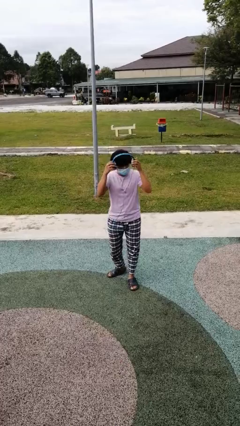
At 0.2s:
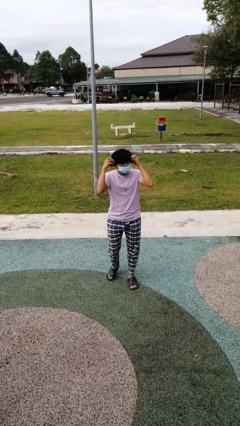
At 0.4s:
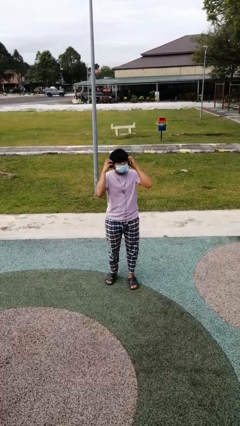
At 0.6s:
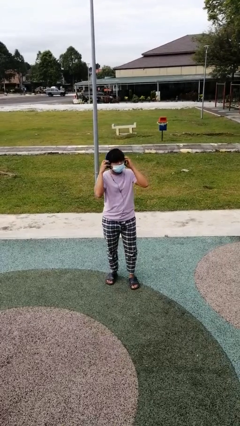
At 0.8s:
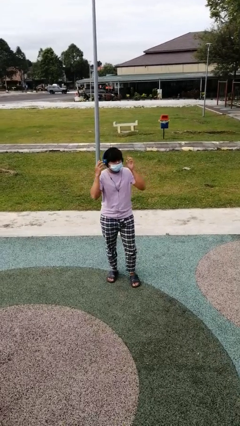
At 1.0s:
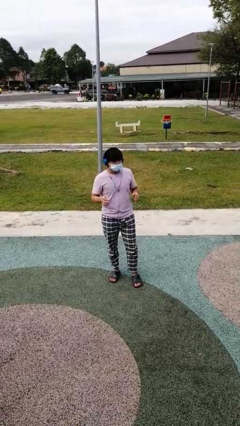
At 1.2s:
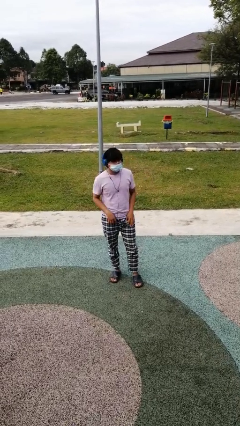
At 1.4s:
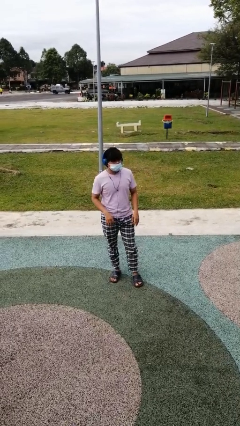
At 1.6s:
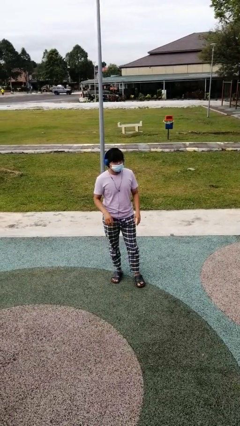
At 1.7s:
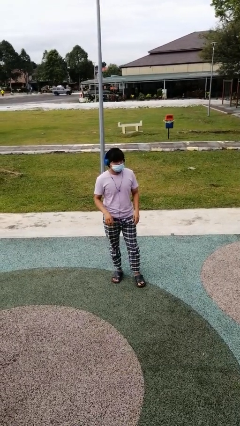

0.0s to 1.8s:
person puts on headphones

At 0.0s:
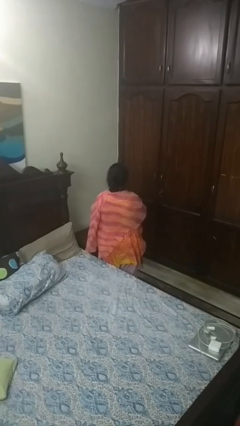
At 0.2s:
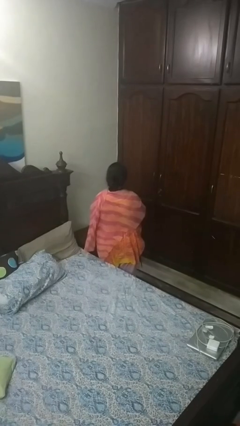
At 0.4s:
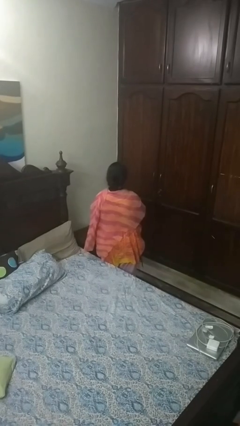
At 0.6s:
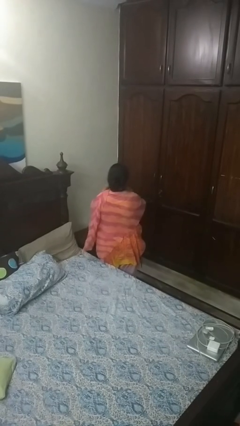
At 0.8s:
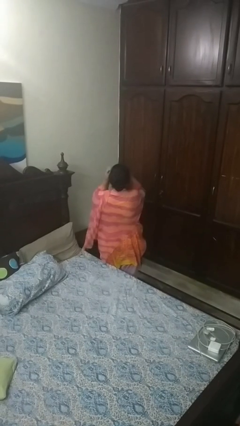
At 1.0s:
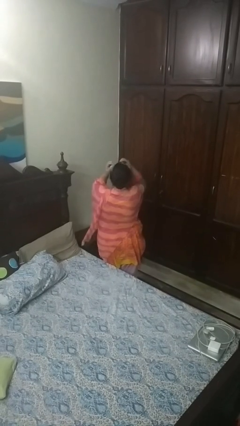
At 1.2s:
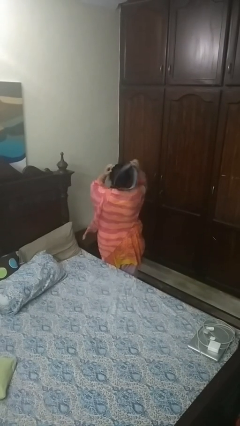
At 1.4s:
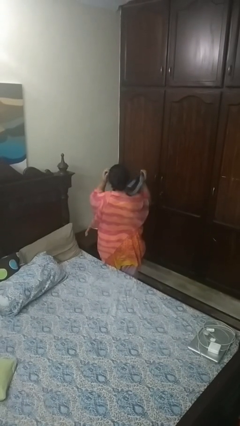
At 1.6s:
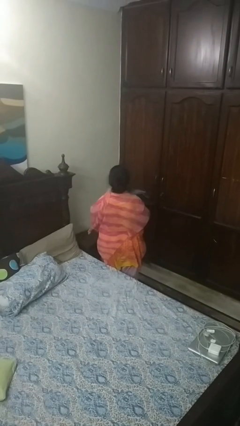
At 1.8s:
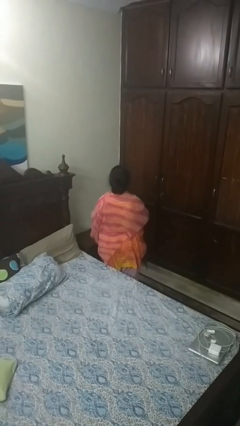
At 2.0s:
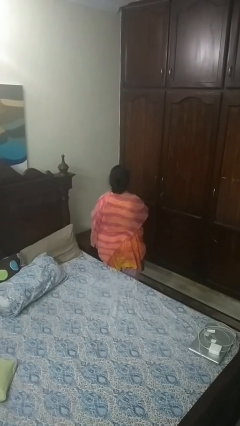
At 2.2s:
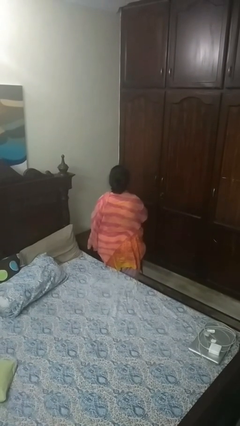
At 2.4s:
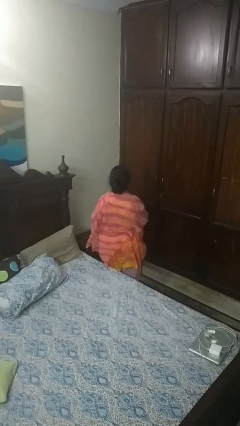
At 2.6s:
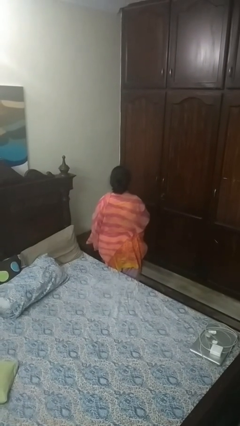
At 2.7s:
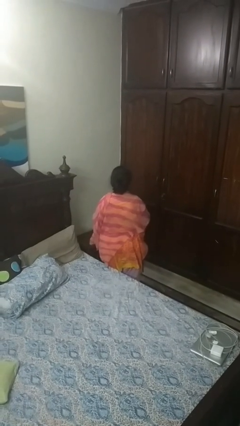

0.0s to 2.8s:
person takes off necktie

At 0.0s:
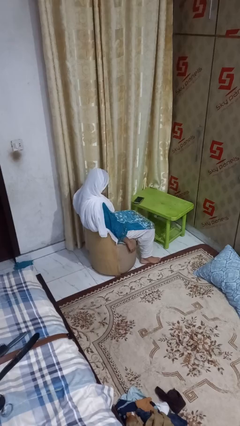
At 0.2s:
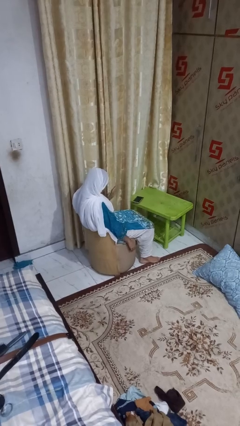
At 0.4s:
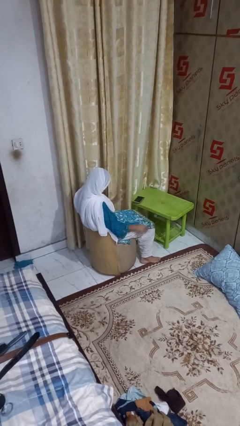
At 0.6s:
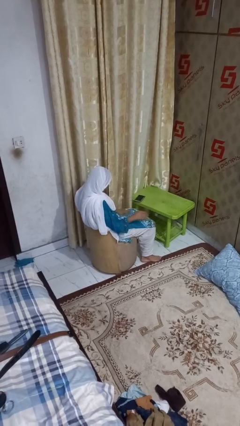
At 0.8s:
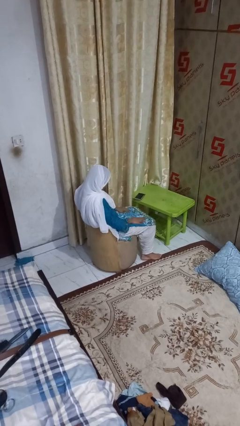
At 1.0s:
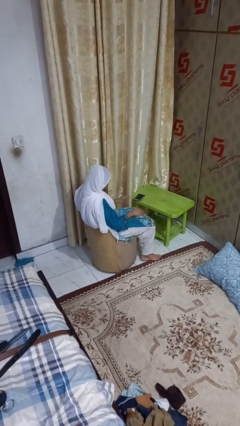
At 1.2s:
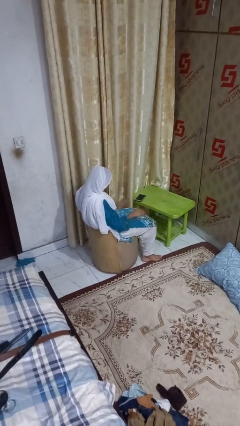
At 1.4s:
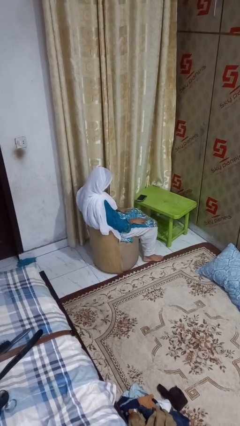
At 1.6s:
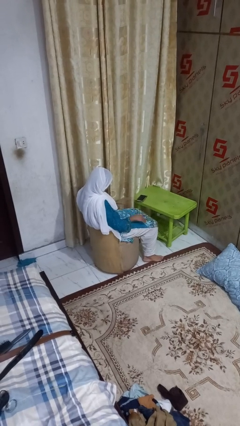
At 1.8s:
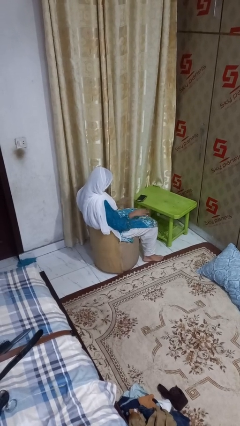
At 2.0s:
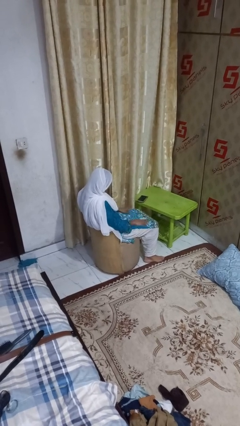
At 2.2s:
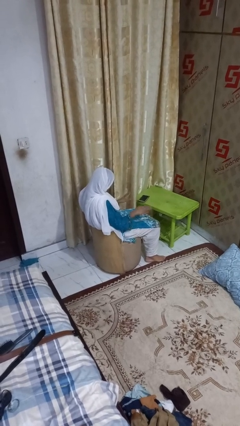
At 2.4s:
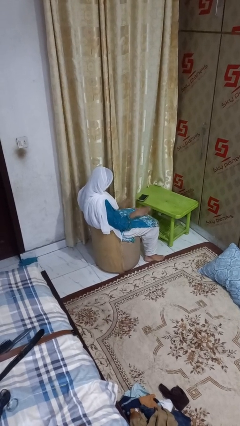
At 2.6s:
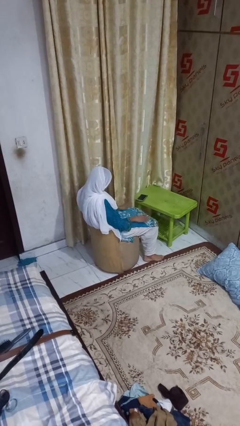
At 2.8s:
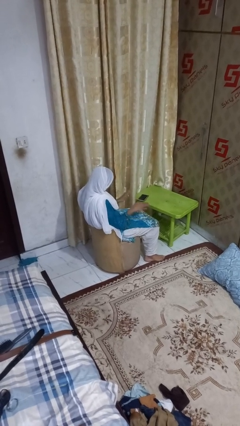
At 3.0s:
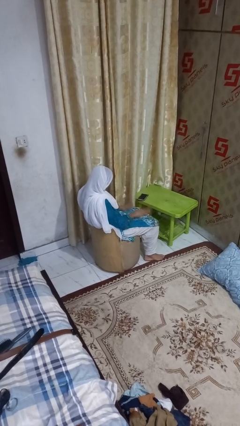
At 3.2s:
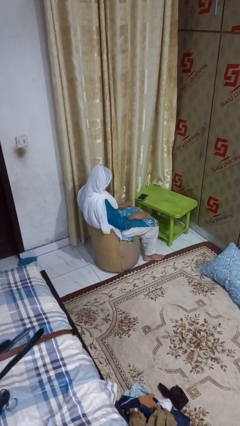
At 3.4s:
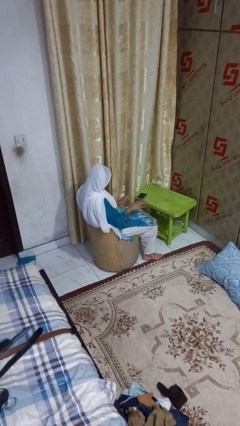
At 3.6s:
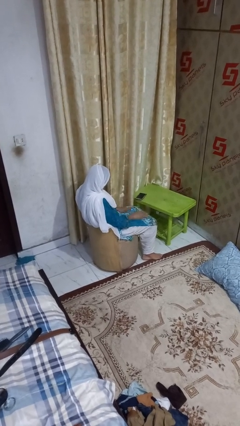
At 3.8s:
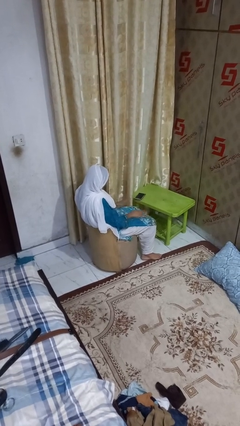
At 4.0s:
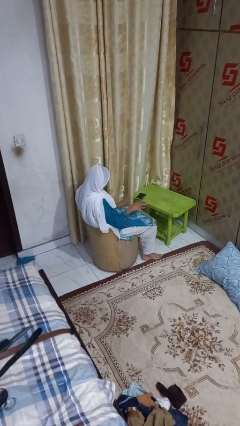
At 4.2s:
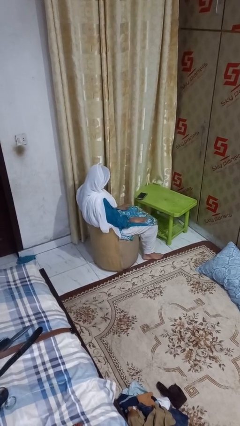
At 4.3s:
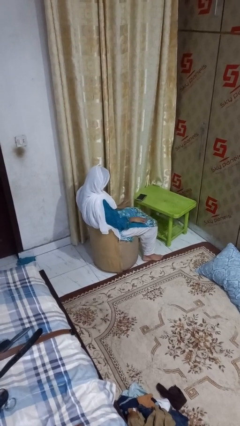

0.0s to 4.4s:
person slaps hands on thighs

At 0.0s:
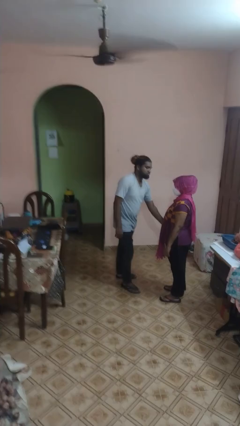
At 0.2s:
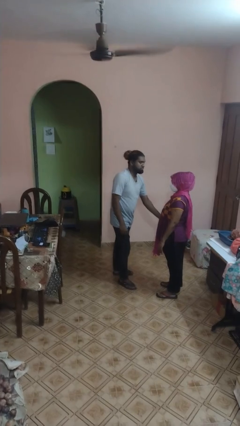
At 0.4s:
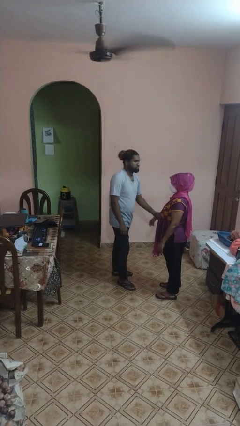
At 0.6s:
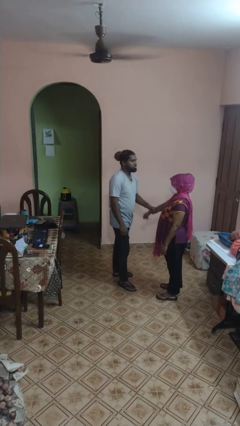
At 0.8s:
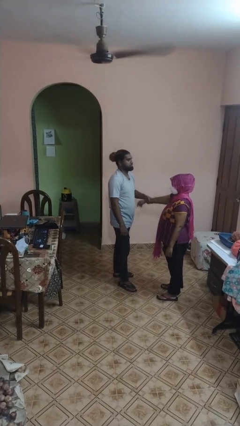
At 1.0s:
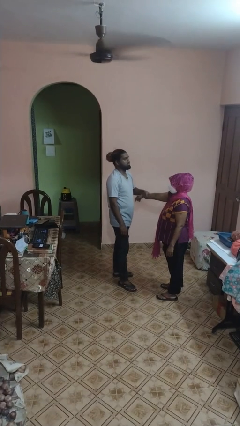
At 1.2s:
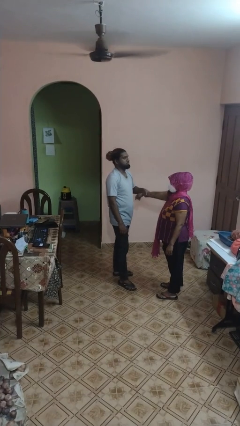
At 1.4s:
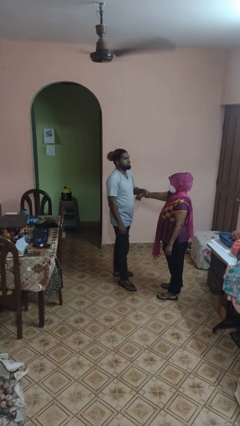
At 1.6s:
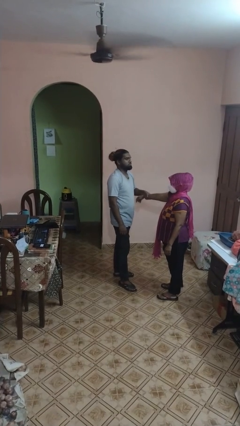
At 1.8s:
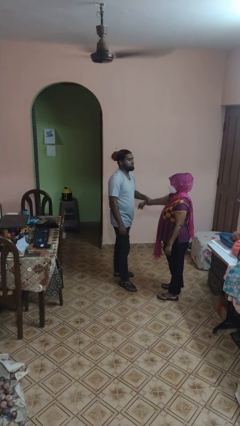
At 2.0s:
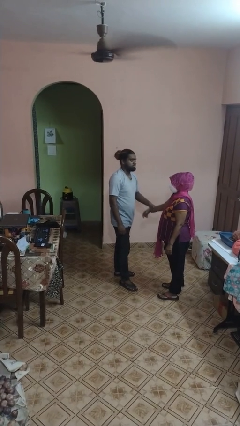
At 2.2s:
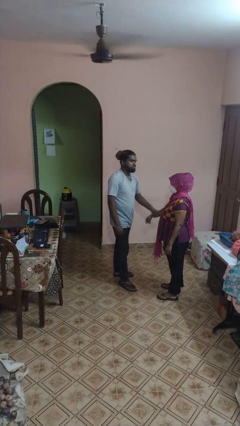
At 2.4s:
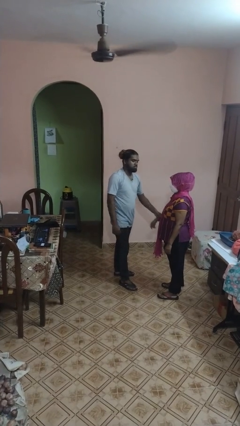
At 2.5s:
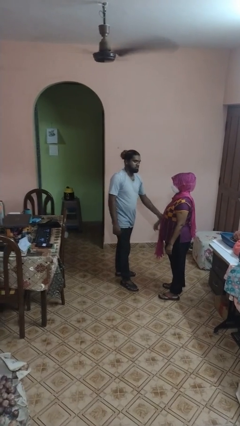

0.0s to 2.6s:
person grabs person by forearm

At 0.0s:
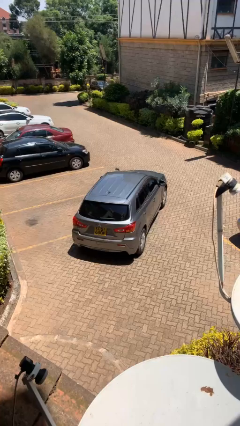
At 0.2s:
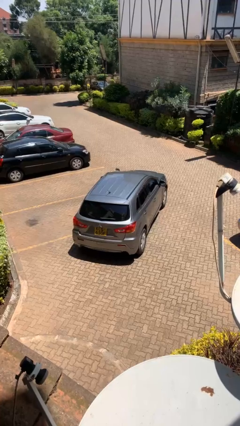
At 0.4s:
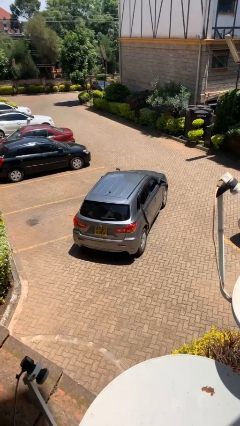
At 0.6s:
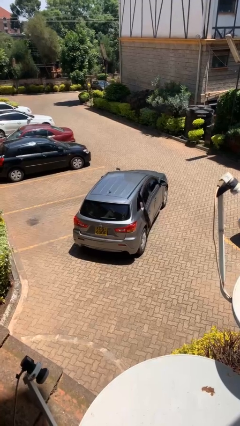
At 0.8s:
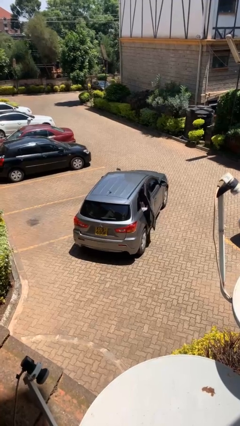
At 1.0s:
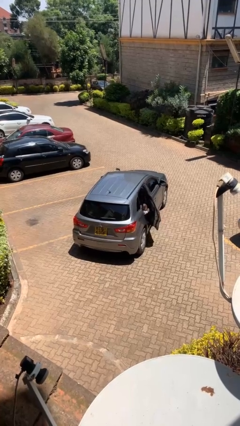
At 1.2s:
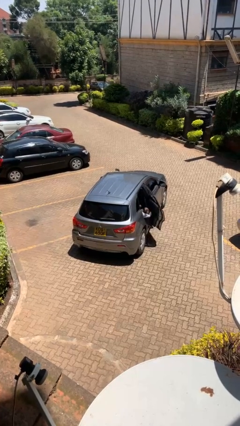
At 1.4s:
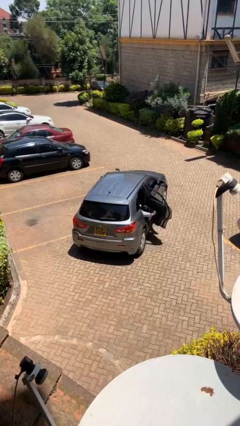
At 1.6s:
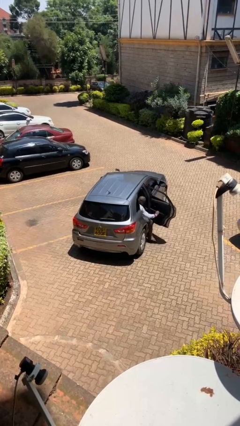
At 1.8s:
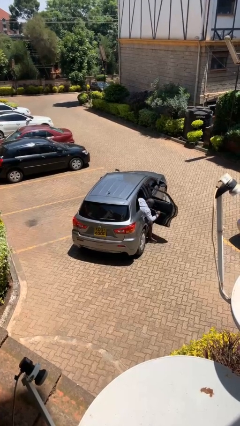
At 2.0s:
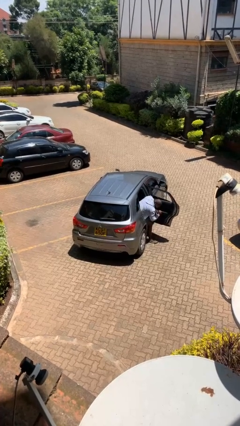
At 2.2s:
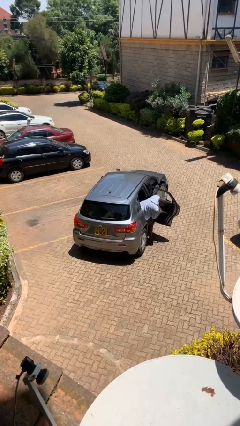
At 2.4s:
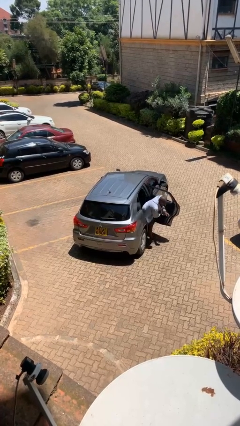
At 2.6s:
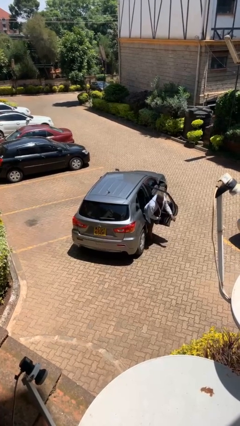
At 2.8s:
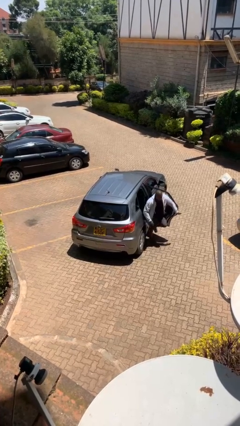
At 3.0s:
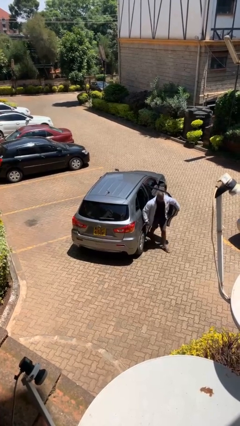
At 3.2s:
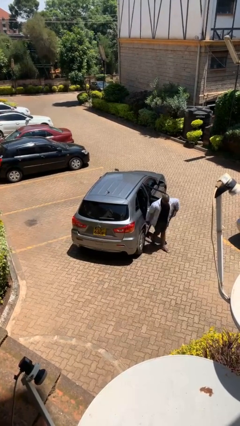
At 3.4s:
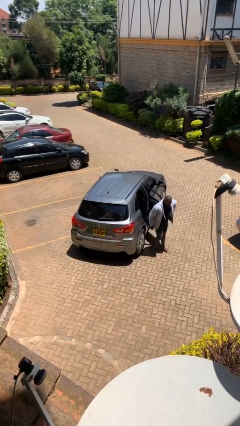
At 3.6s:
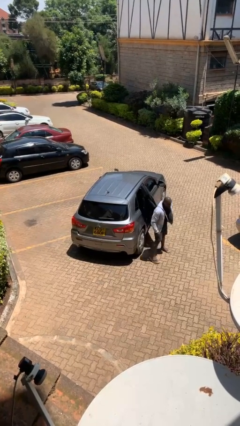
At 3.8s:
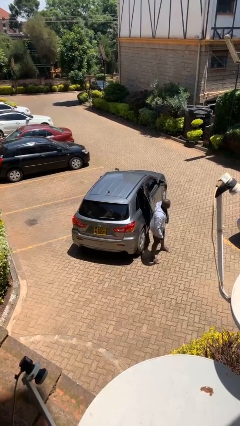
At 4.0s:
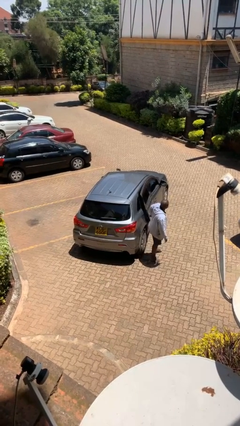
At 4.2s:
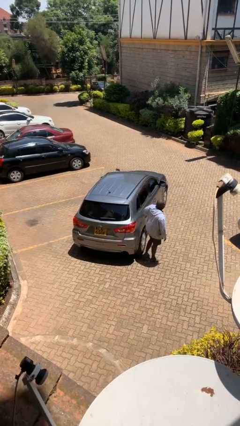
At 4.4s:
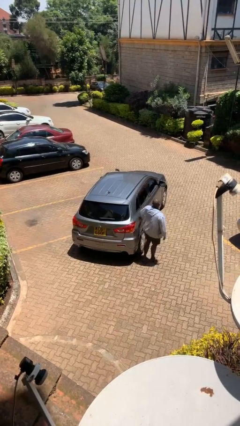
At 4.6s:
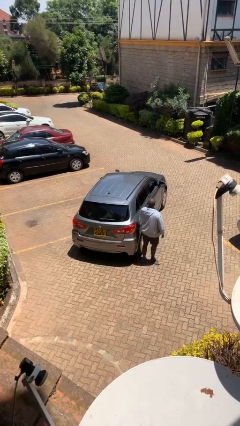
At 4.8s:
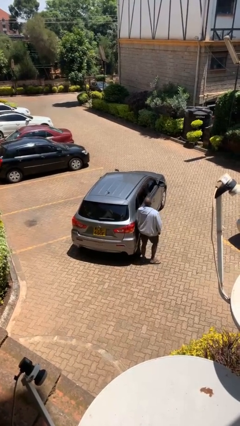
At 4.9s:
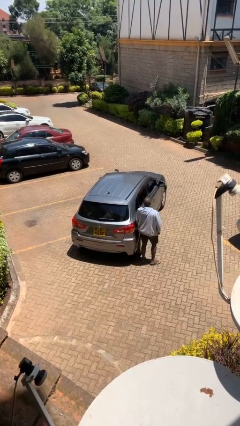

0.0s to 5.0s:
car drops off person

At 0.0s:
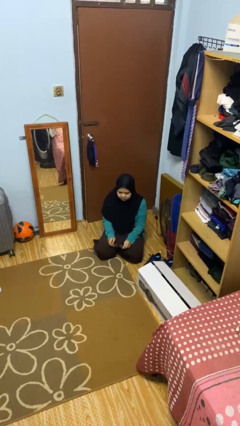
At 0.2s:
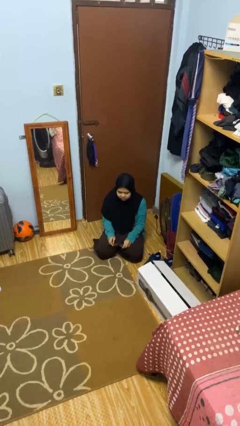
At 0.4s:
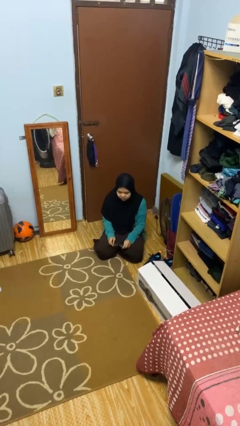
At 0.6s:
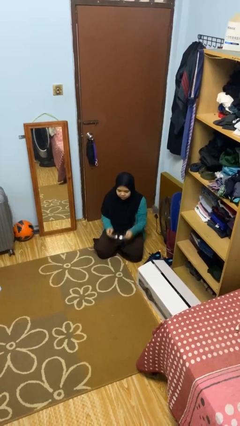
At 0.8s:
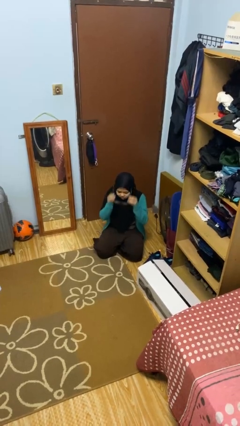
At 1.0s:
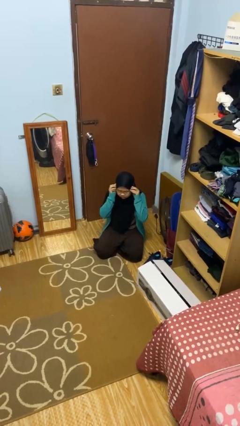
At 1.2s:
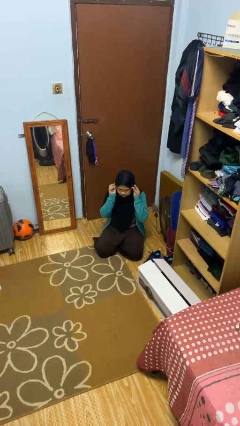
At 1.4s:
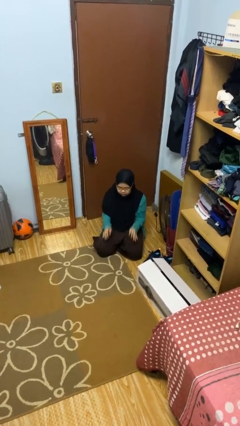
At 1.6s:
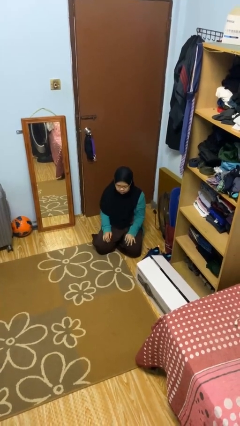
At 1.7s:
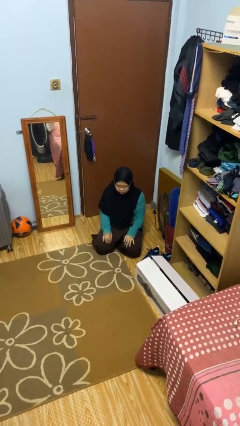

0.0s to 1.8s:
person puts on glasses
